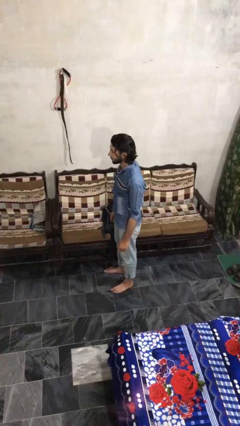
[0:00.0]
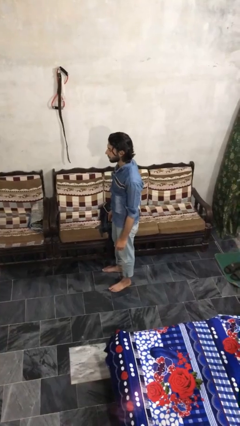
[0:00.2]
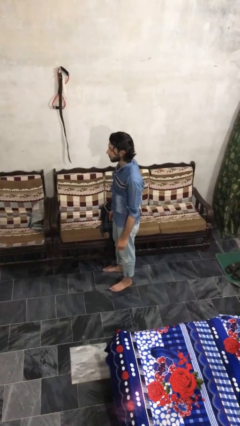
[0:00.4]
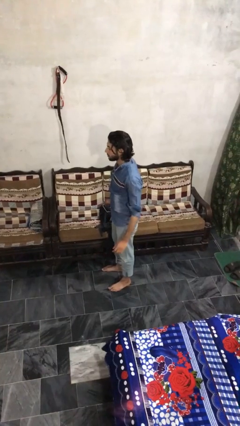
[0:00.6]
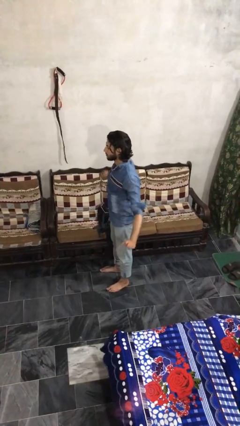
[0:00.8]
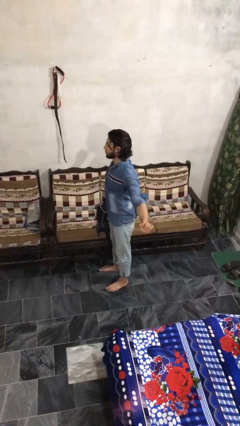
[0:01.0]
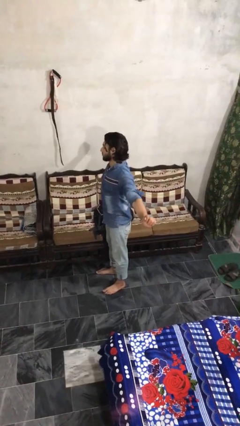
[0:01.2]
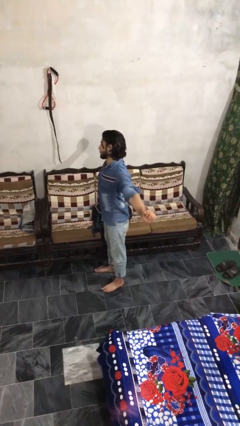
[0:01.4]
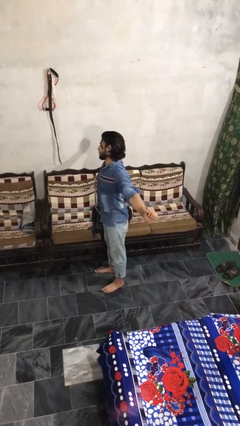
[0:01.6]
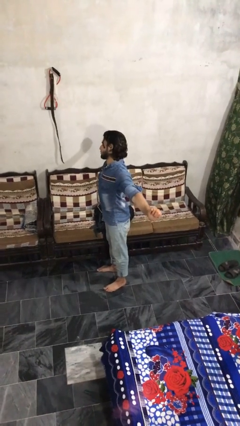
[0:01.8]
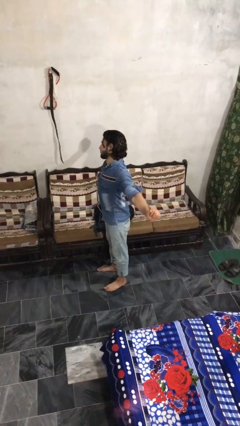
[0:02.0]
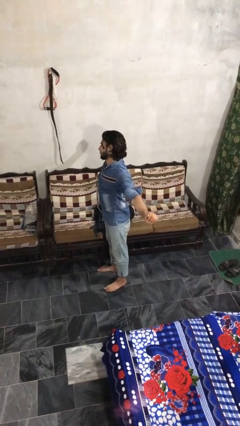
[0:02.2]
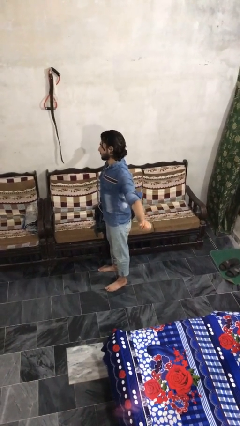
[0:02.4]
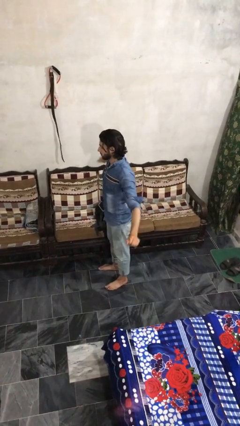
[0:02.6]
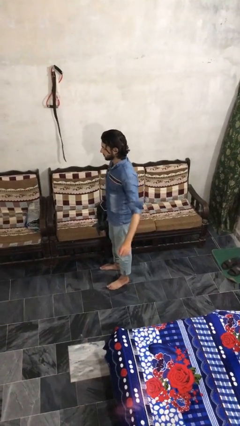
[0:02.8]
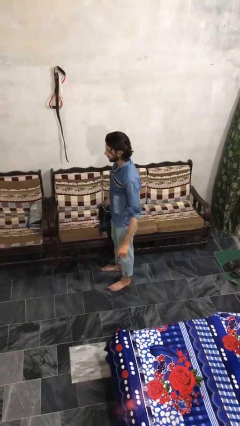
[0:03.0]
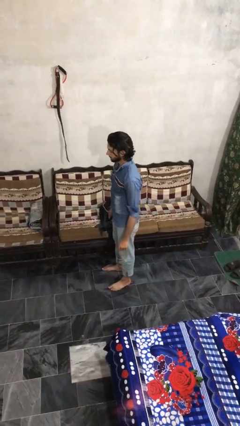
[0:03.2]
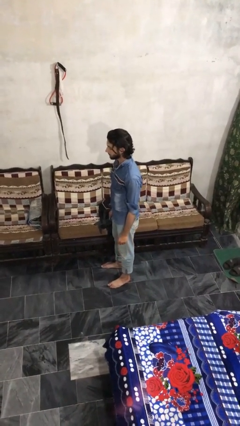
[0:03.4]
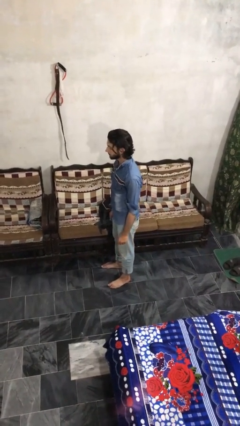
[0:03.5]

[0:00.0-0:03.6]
person stretches arms to side

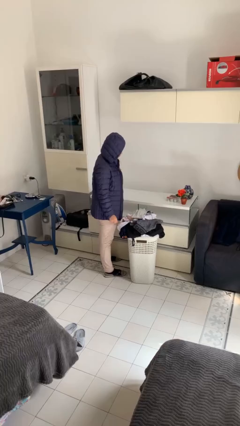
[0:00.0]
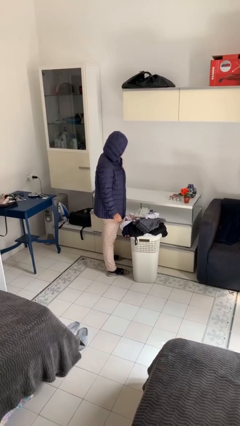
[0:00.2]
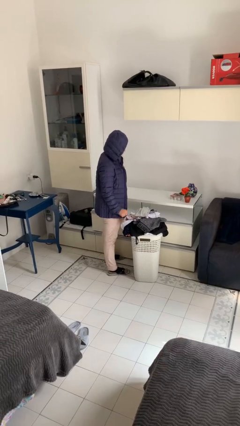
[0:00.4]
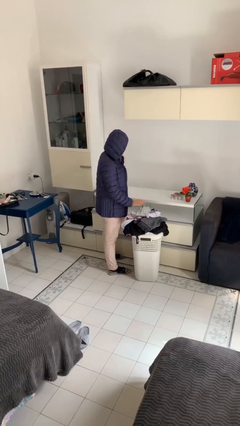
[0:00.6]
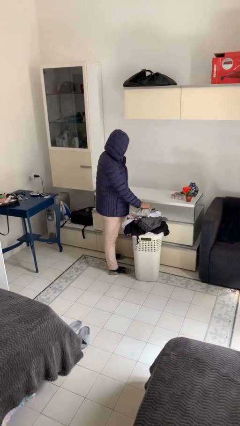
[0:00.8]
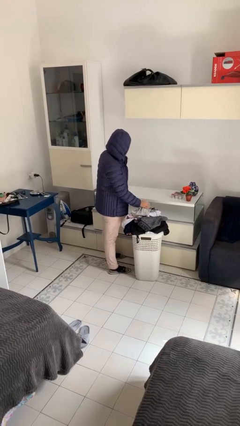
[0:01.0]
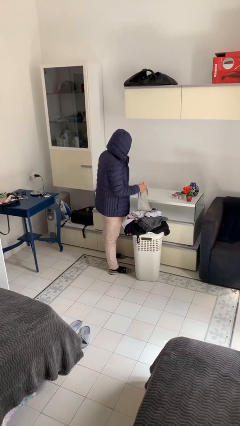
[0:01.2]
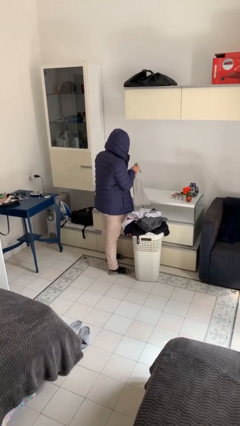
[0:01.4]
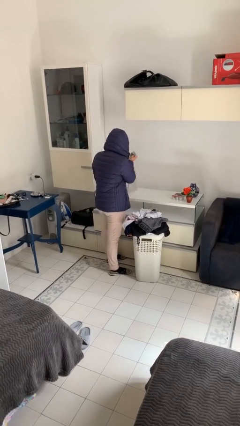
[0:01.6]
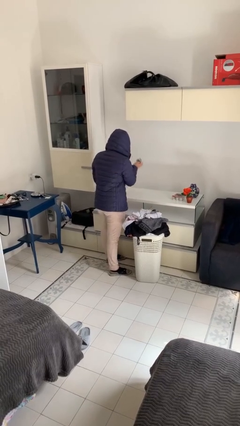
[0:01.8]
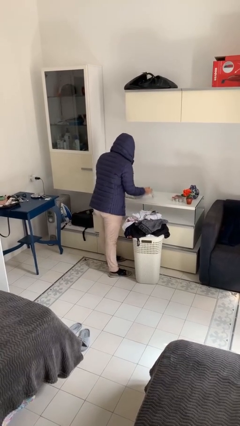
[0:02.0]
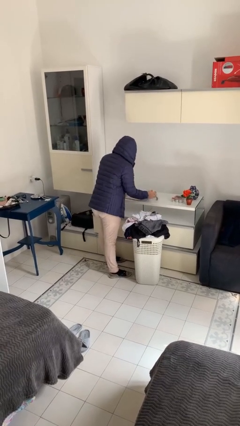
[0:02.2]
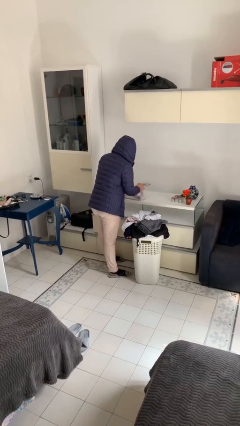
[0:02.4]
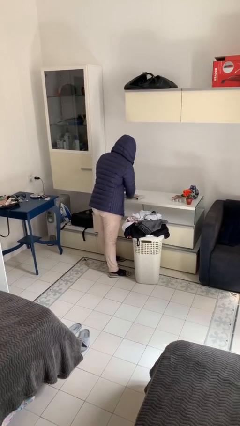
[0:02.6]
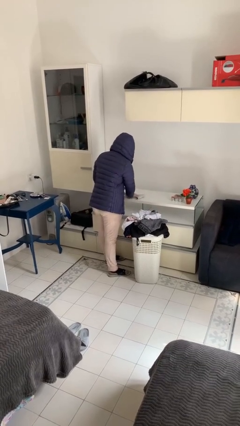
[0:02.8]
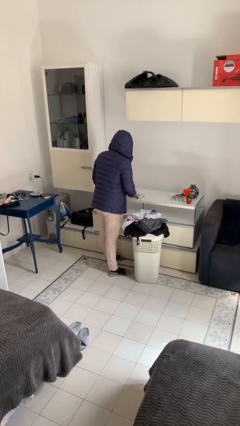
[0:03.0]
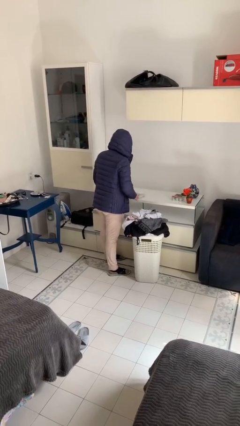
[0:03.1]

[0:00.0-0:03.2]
person folds shirt

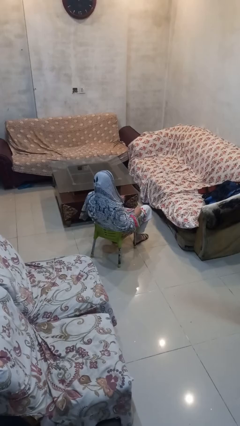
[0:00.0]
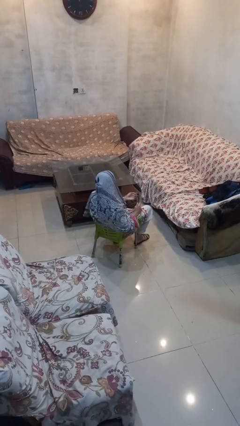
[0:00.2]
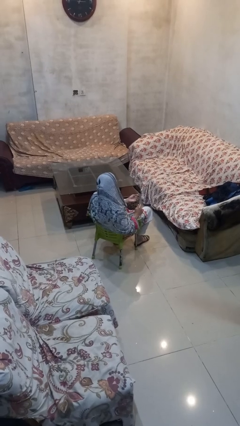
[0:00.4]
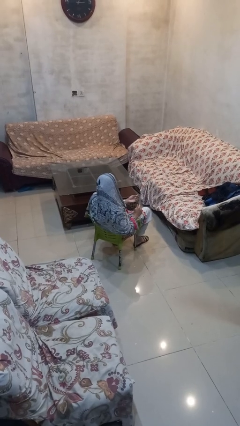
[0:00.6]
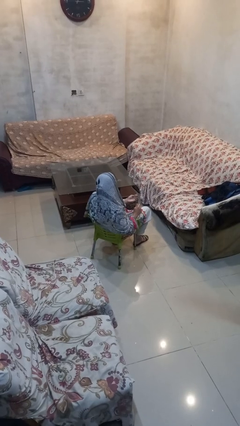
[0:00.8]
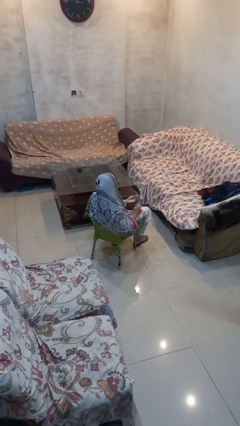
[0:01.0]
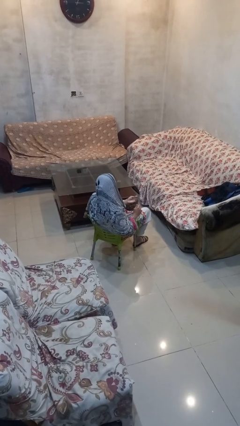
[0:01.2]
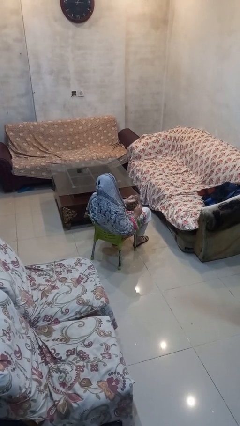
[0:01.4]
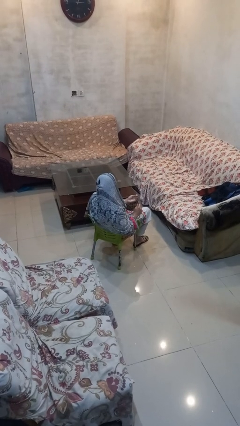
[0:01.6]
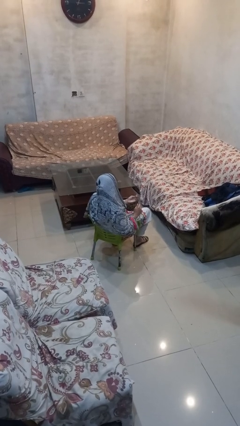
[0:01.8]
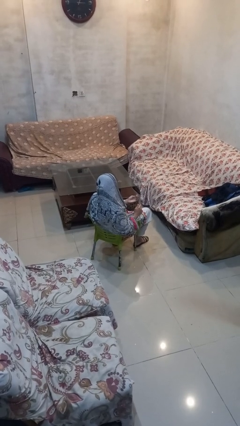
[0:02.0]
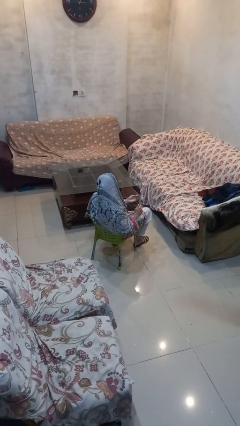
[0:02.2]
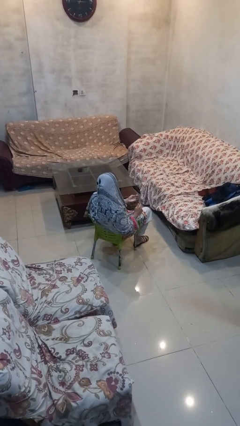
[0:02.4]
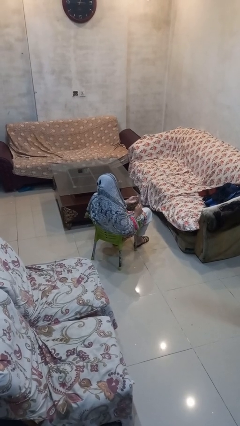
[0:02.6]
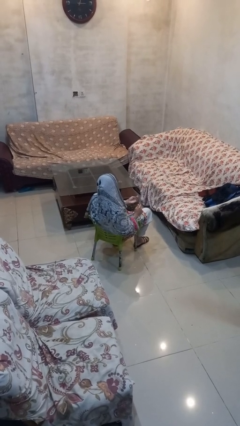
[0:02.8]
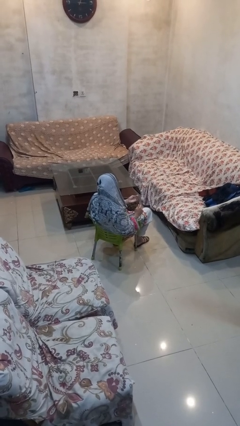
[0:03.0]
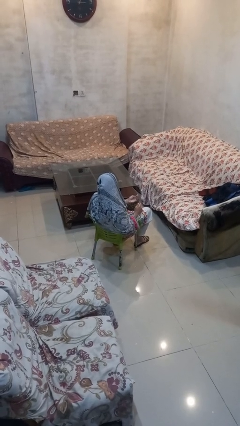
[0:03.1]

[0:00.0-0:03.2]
person files fingernails

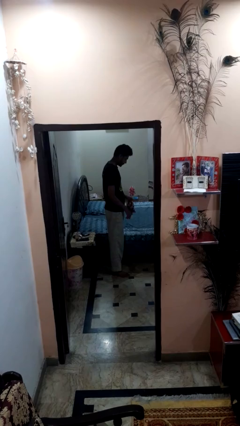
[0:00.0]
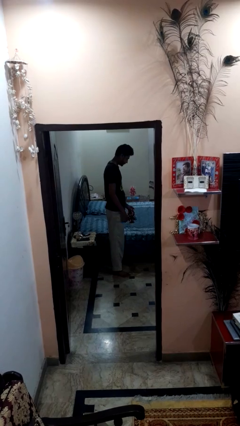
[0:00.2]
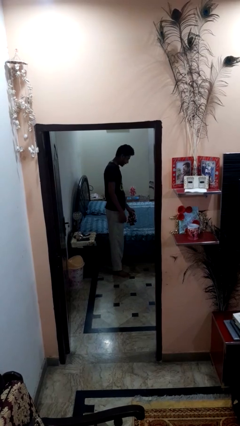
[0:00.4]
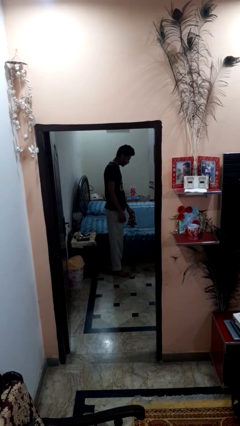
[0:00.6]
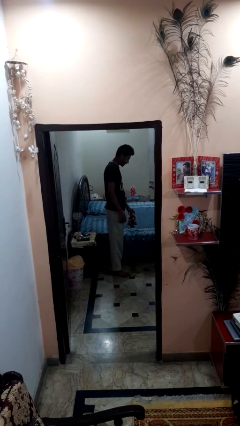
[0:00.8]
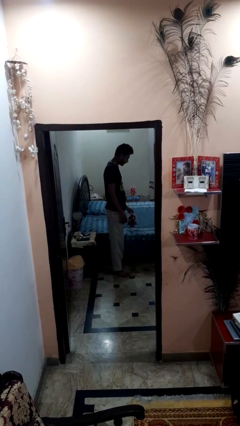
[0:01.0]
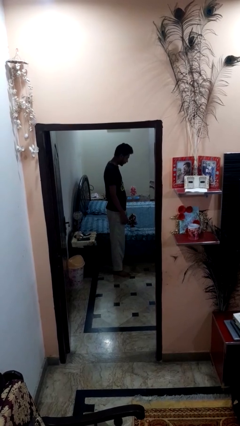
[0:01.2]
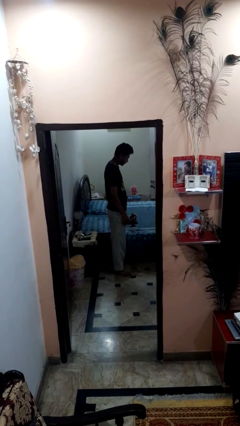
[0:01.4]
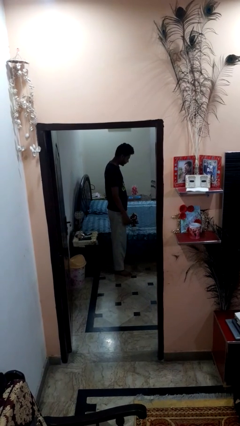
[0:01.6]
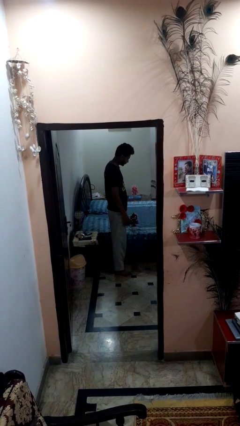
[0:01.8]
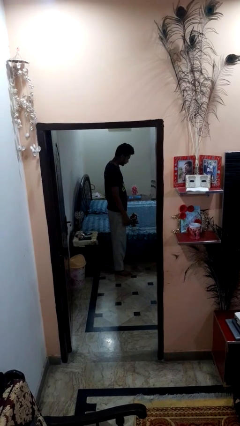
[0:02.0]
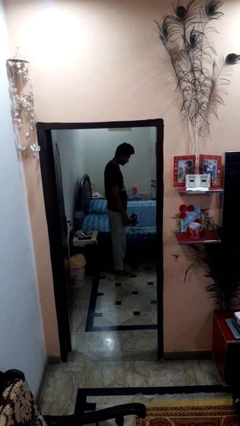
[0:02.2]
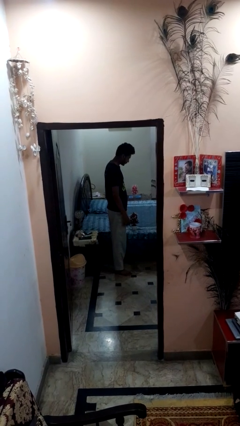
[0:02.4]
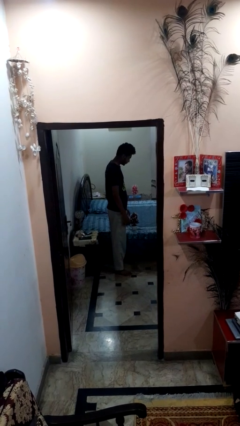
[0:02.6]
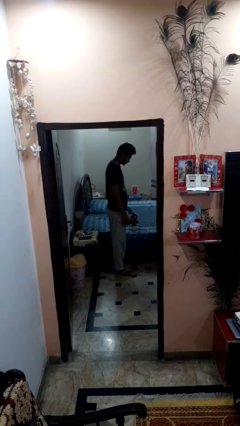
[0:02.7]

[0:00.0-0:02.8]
person puts down object on bed

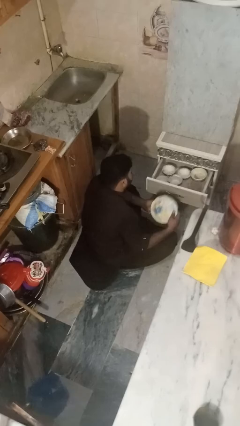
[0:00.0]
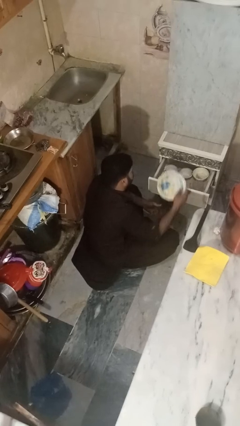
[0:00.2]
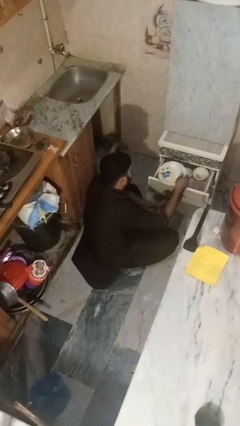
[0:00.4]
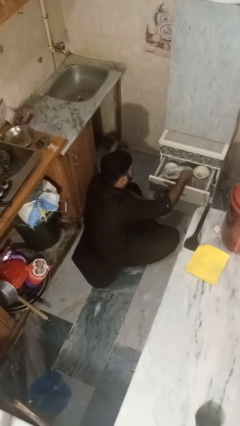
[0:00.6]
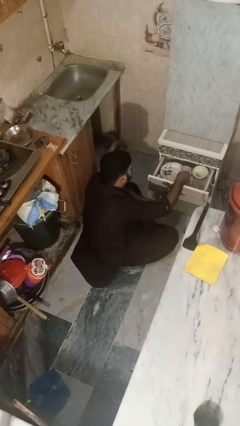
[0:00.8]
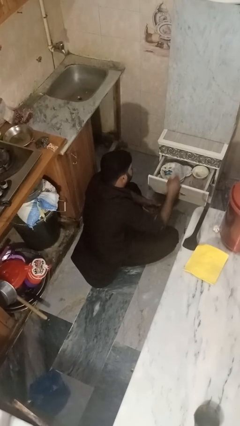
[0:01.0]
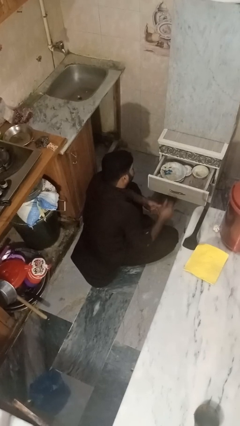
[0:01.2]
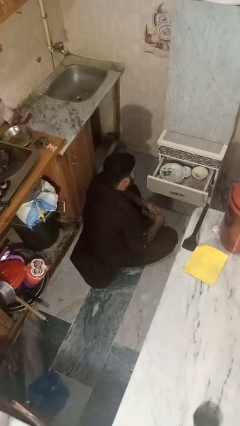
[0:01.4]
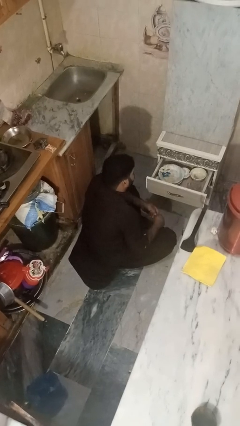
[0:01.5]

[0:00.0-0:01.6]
person puts object into kitchen drawer

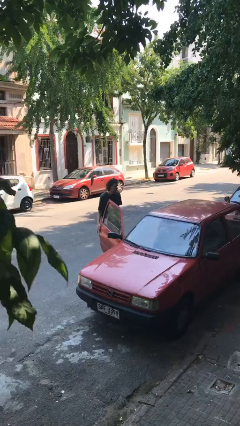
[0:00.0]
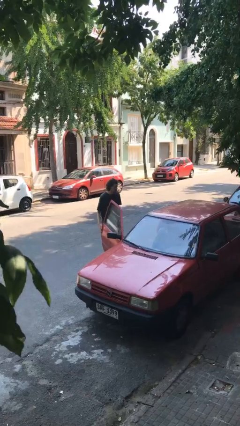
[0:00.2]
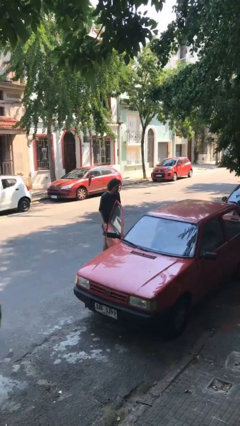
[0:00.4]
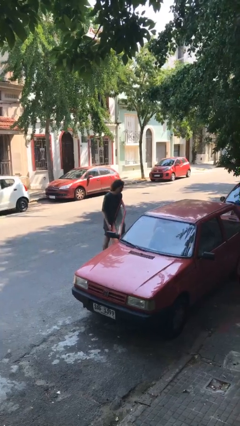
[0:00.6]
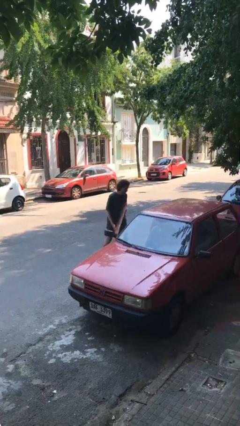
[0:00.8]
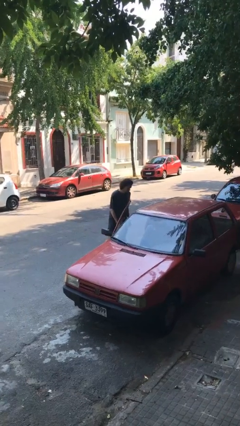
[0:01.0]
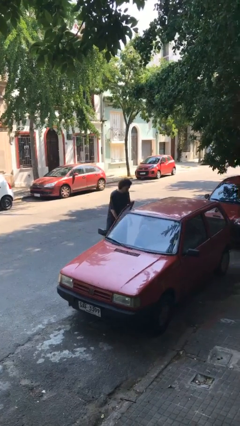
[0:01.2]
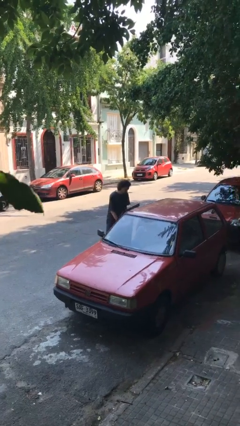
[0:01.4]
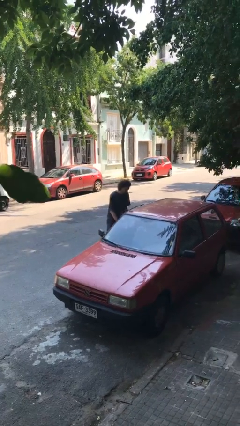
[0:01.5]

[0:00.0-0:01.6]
person closes car door

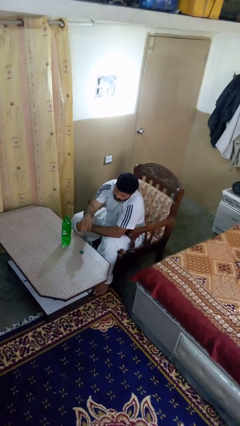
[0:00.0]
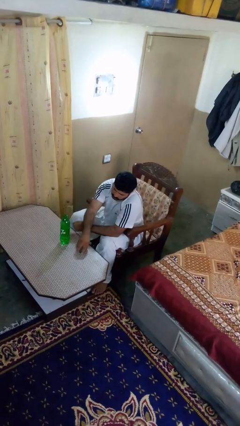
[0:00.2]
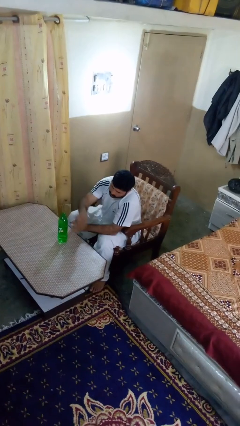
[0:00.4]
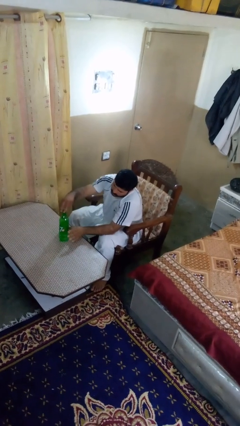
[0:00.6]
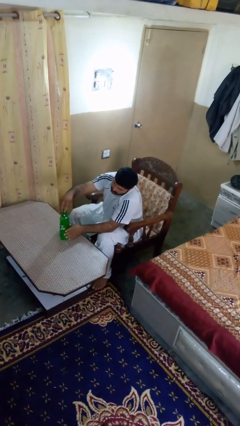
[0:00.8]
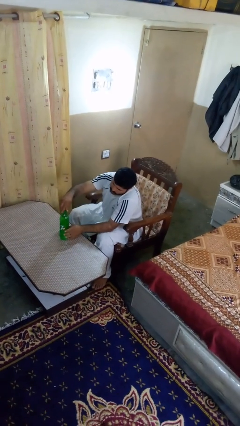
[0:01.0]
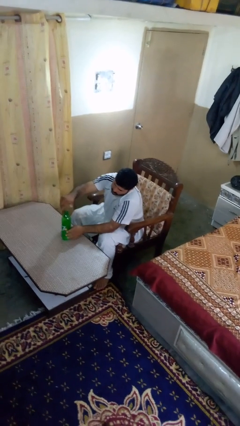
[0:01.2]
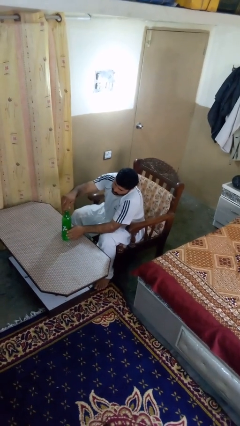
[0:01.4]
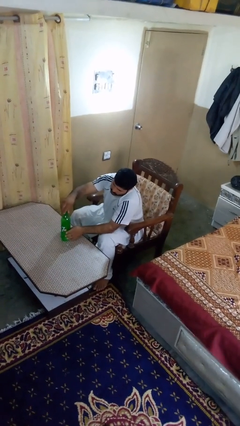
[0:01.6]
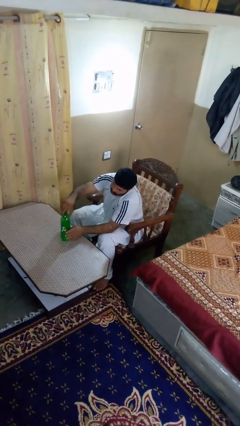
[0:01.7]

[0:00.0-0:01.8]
person screws lid to bottle
